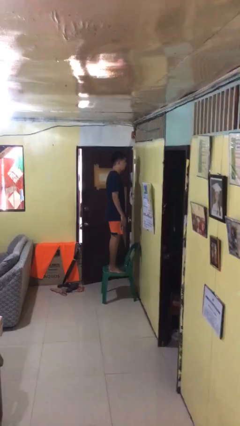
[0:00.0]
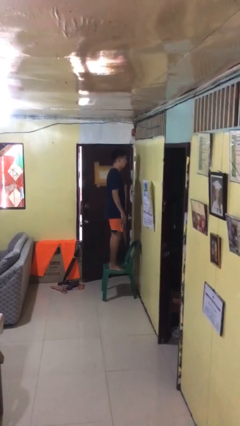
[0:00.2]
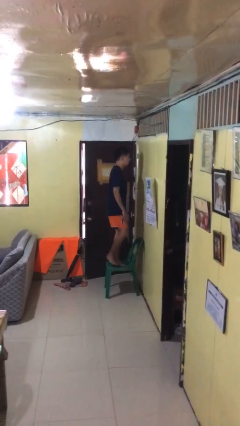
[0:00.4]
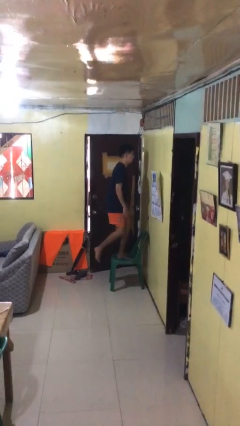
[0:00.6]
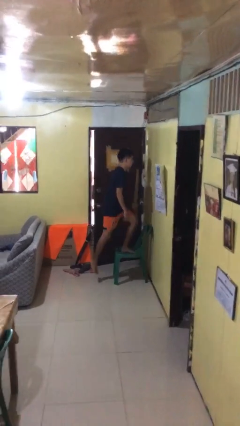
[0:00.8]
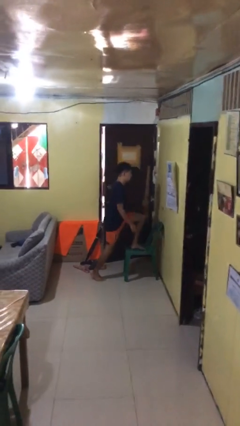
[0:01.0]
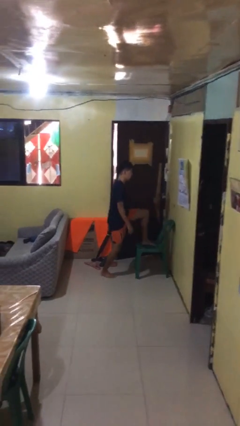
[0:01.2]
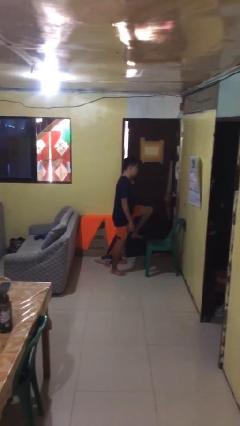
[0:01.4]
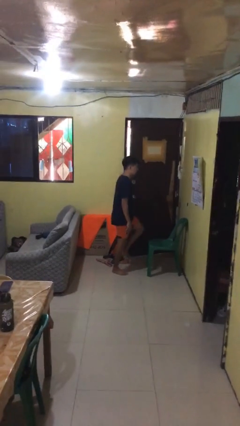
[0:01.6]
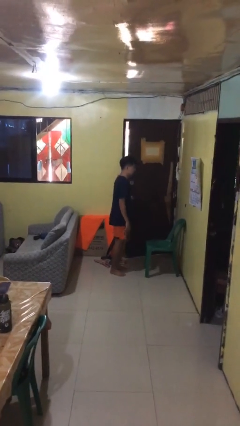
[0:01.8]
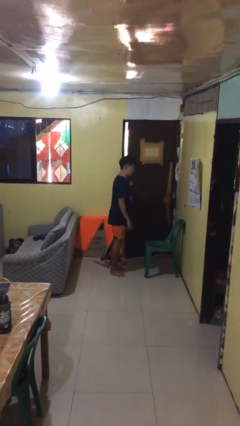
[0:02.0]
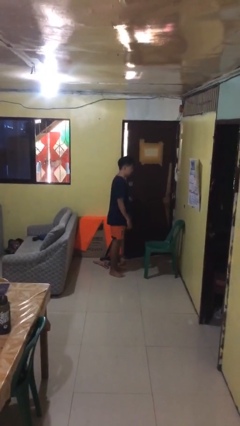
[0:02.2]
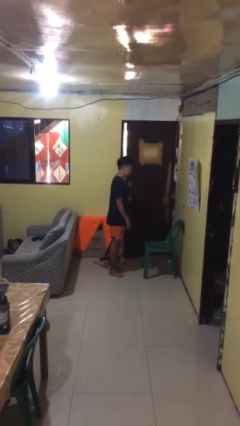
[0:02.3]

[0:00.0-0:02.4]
person climbs off chair

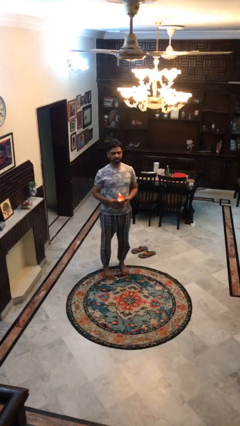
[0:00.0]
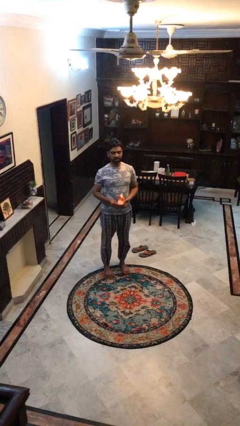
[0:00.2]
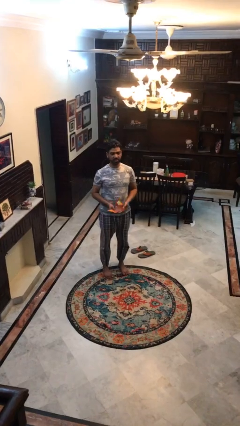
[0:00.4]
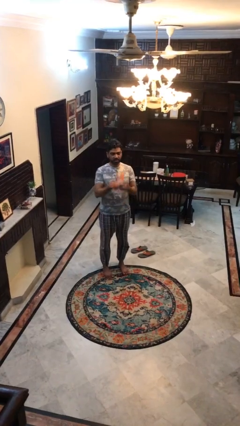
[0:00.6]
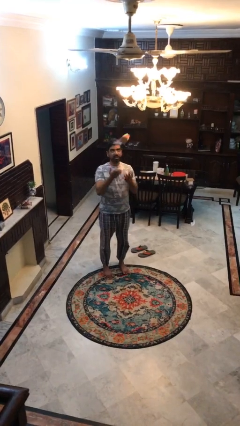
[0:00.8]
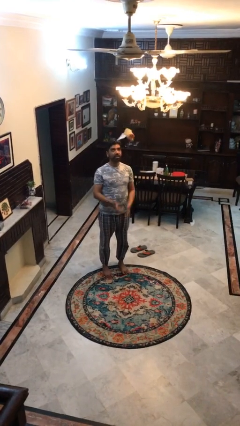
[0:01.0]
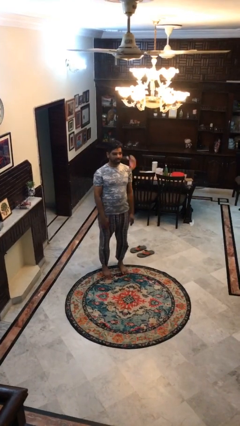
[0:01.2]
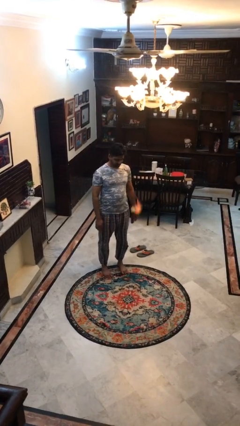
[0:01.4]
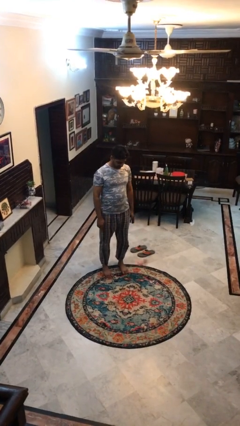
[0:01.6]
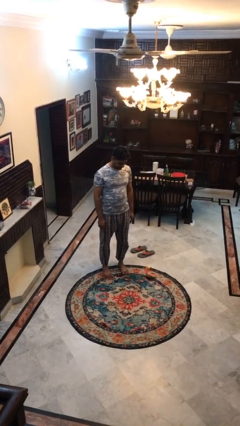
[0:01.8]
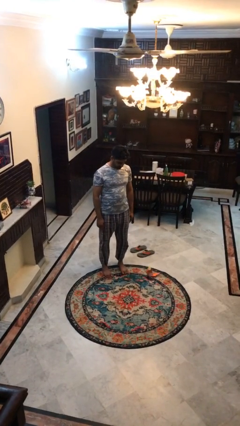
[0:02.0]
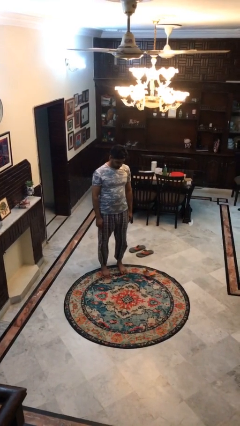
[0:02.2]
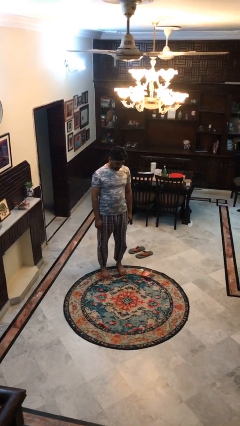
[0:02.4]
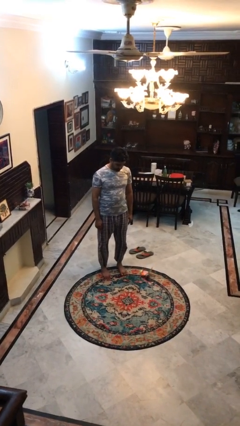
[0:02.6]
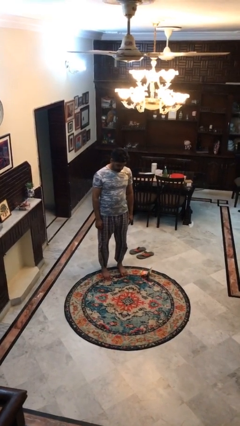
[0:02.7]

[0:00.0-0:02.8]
person throws object into air

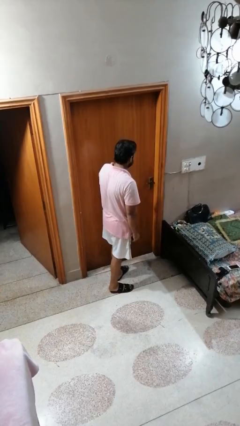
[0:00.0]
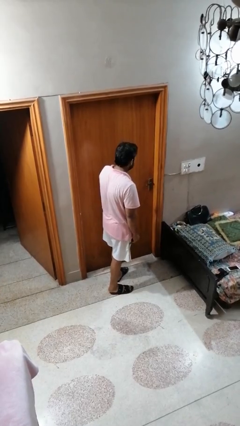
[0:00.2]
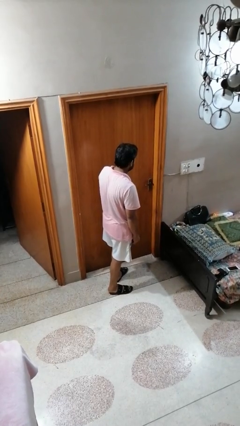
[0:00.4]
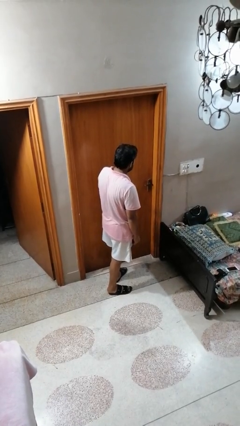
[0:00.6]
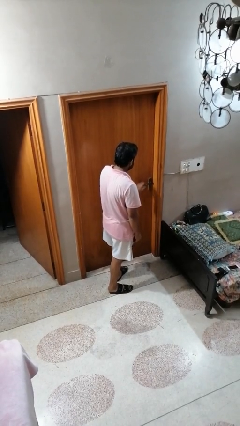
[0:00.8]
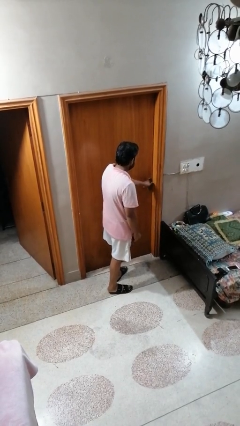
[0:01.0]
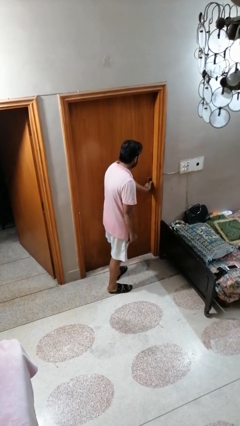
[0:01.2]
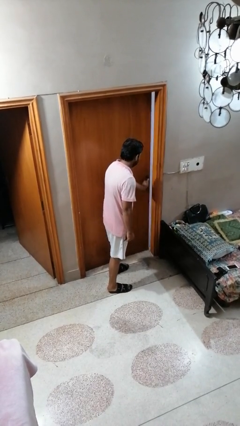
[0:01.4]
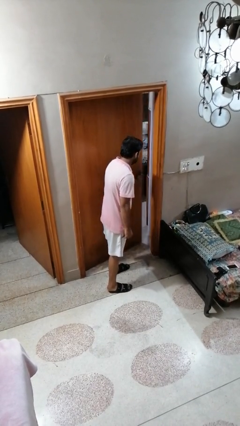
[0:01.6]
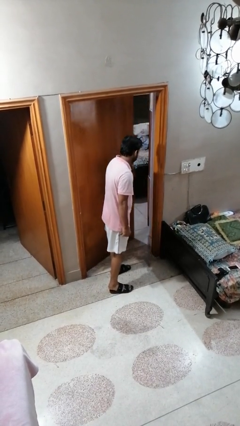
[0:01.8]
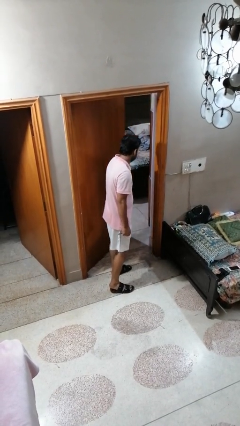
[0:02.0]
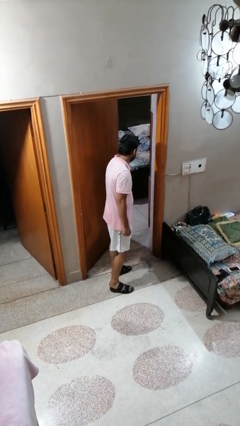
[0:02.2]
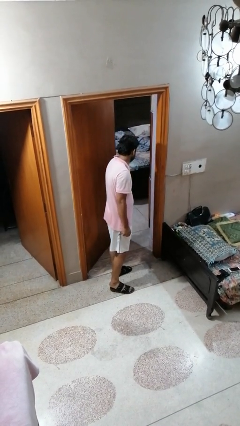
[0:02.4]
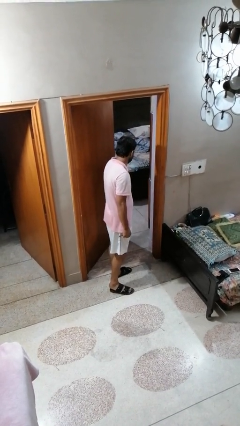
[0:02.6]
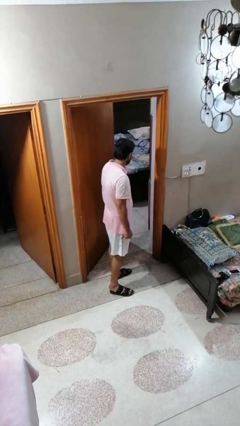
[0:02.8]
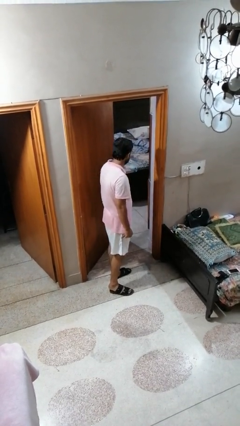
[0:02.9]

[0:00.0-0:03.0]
person opens facility door

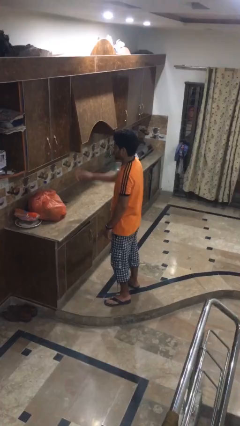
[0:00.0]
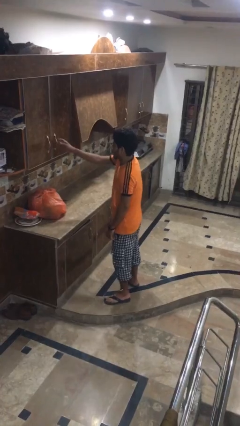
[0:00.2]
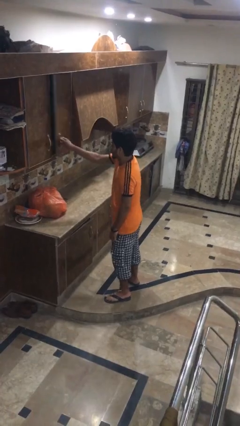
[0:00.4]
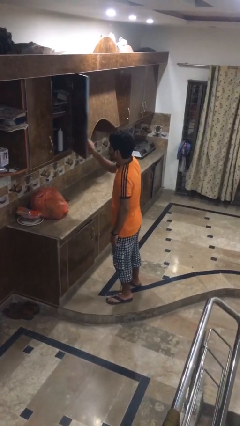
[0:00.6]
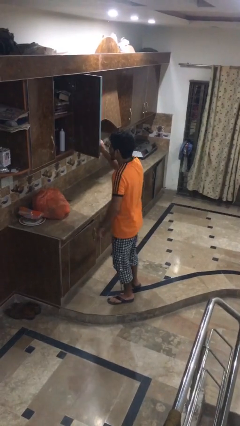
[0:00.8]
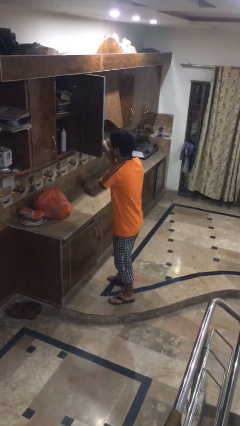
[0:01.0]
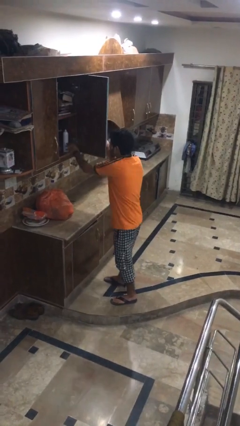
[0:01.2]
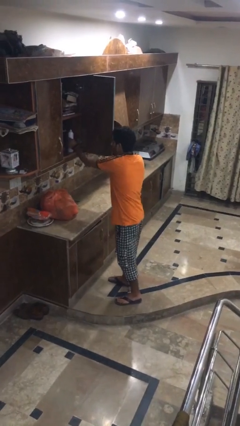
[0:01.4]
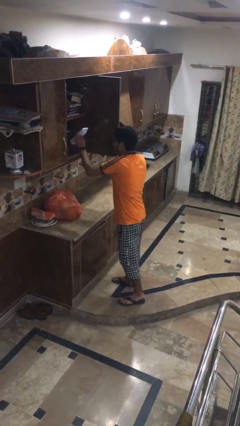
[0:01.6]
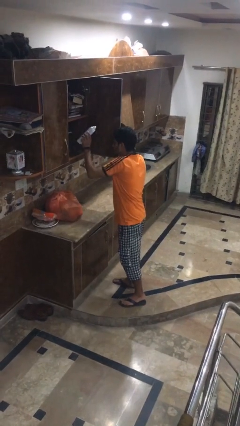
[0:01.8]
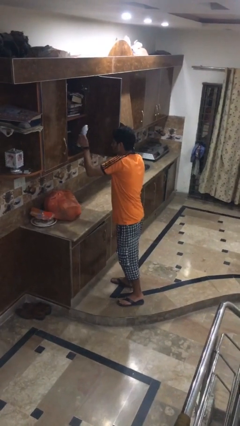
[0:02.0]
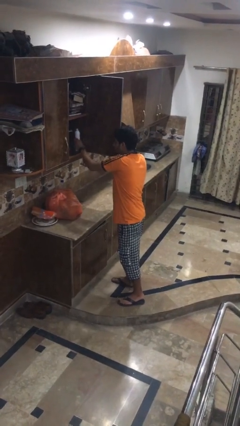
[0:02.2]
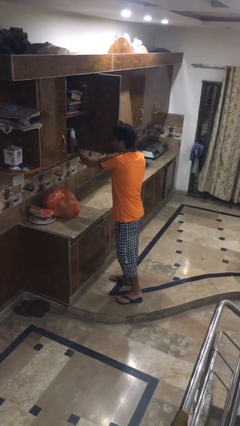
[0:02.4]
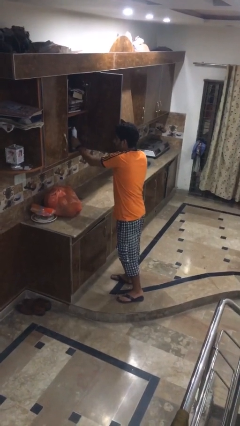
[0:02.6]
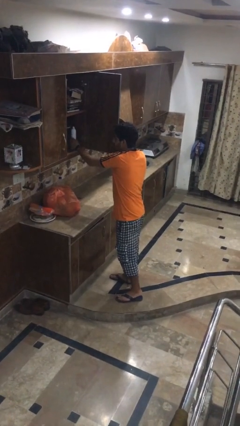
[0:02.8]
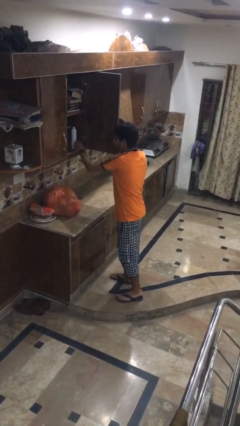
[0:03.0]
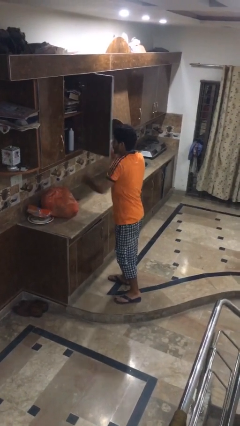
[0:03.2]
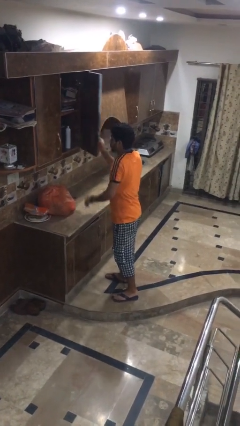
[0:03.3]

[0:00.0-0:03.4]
person searches in kitchen drawer

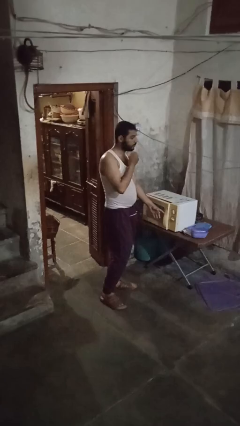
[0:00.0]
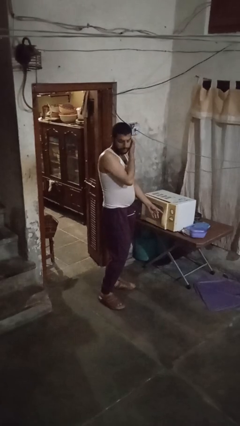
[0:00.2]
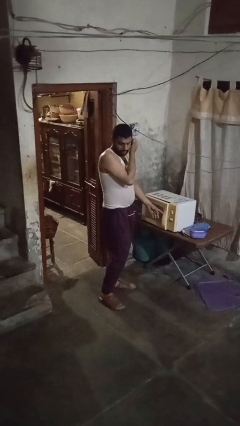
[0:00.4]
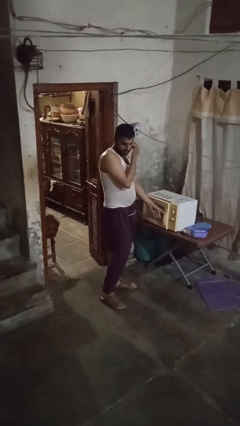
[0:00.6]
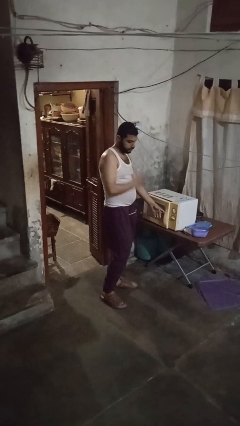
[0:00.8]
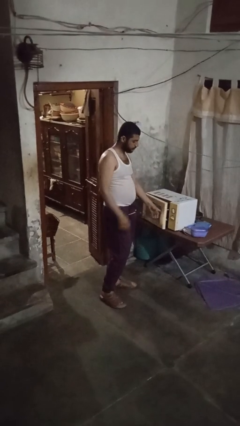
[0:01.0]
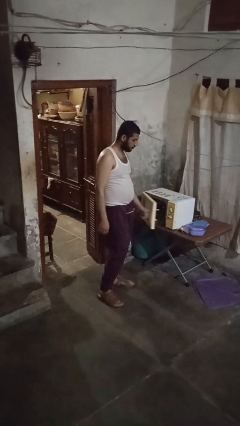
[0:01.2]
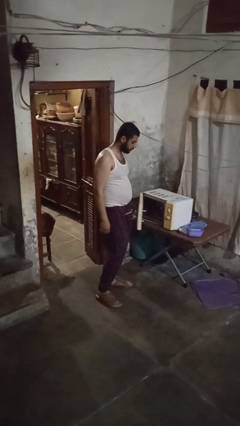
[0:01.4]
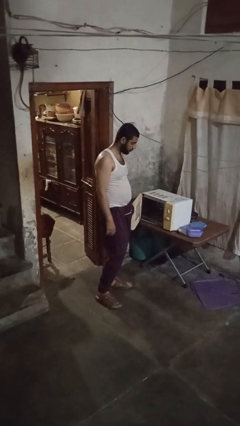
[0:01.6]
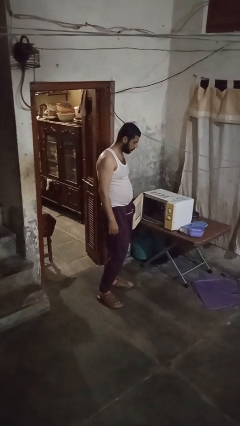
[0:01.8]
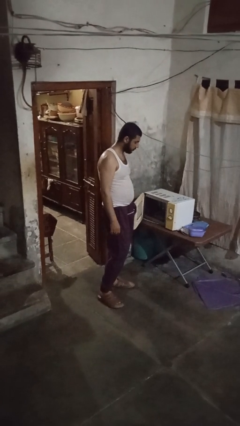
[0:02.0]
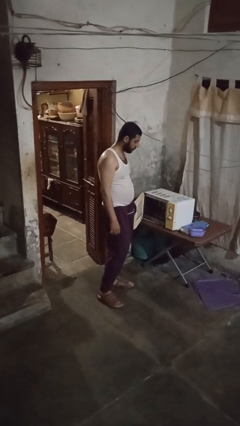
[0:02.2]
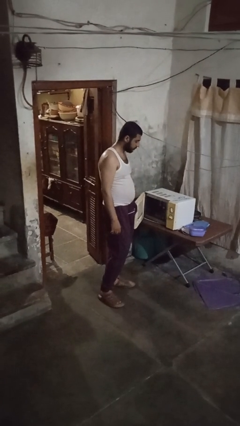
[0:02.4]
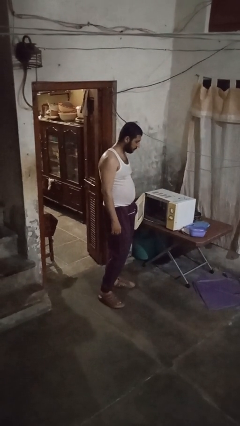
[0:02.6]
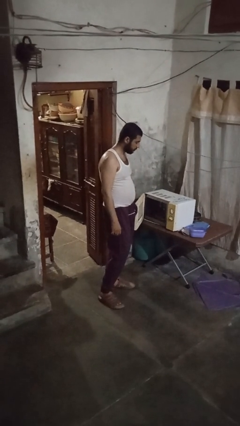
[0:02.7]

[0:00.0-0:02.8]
person opens microwave

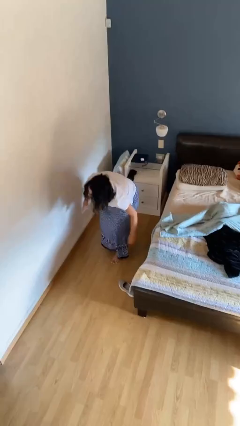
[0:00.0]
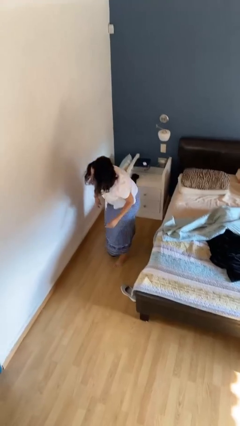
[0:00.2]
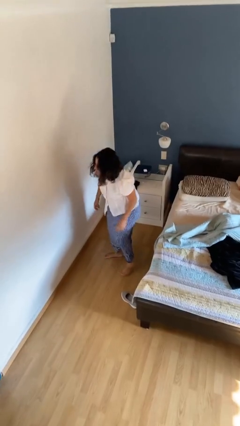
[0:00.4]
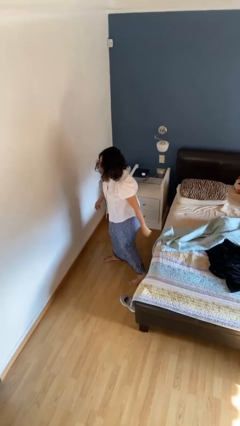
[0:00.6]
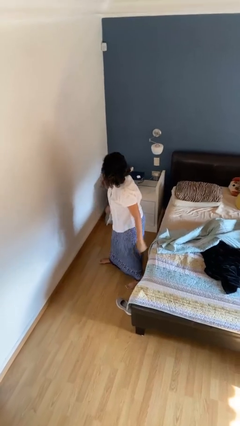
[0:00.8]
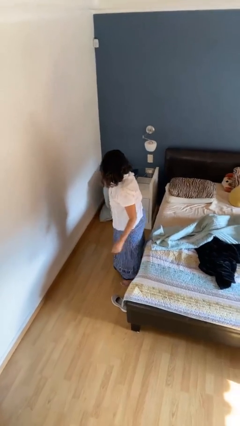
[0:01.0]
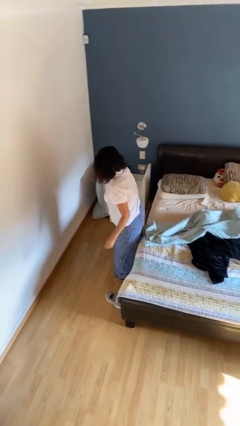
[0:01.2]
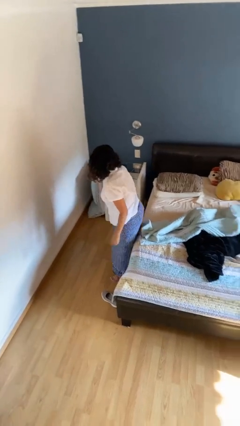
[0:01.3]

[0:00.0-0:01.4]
person stands up from floor

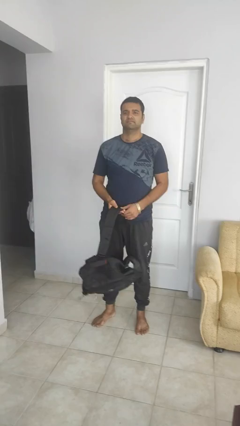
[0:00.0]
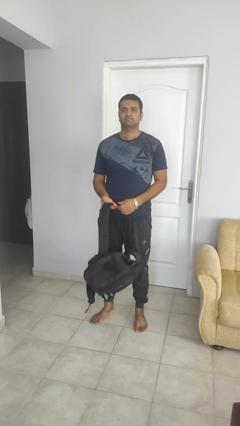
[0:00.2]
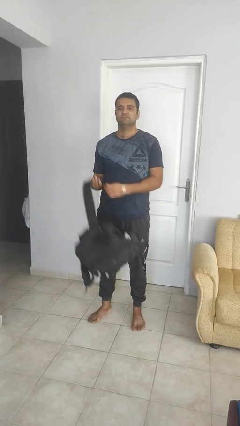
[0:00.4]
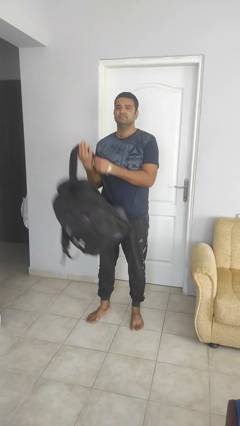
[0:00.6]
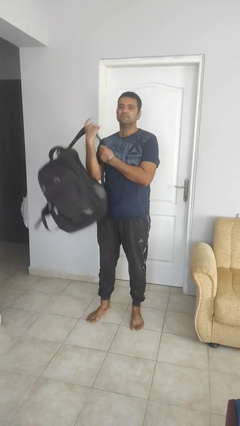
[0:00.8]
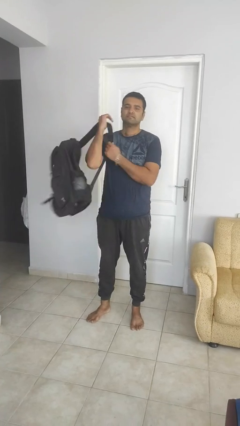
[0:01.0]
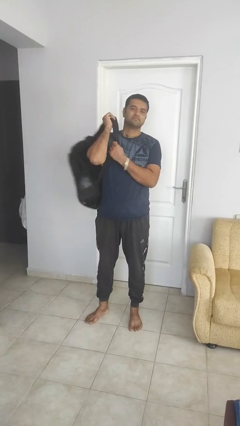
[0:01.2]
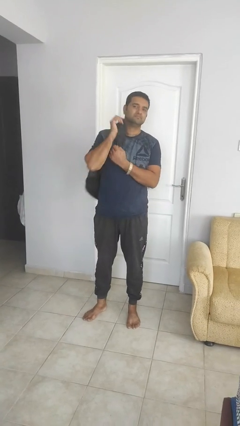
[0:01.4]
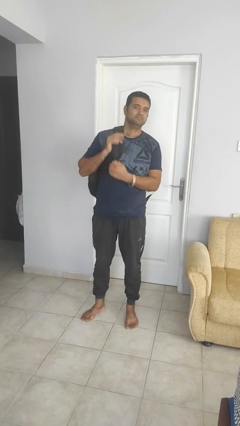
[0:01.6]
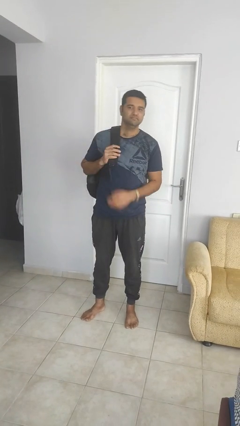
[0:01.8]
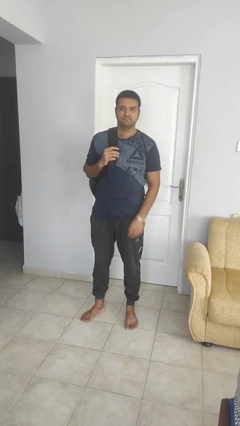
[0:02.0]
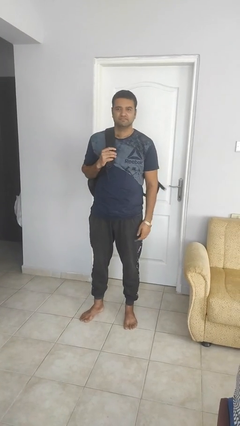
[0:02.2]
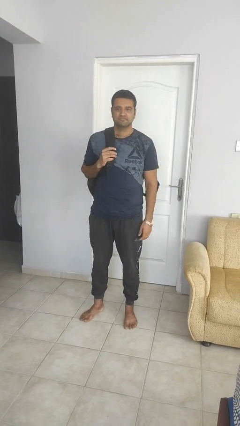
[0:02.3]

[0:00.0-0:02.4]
person puts on backpack
